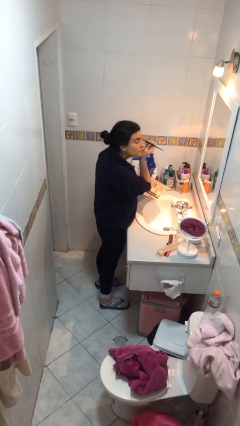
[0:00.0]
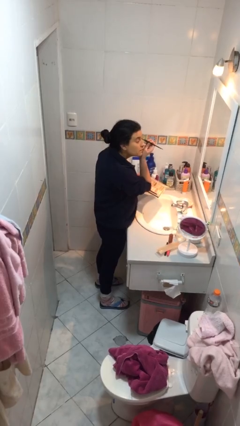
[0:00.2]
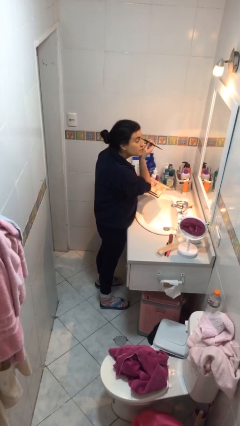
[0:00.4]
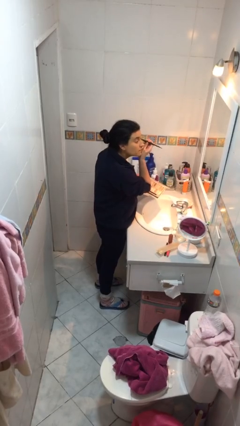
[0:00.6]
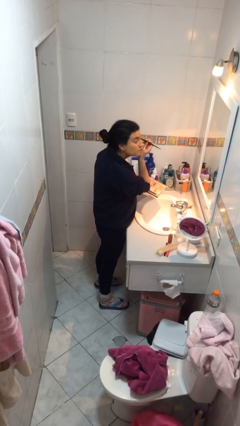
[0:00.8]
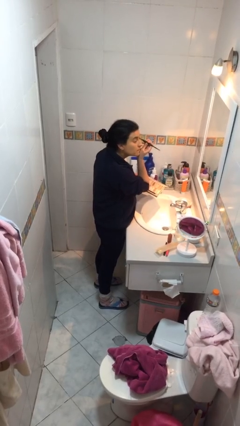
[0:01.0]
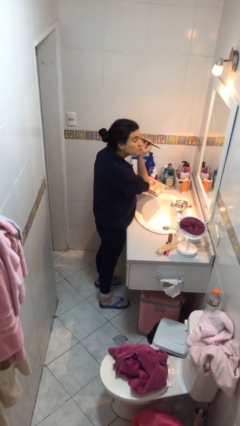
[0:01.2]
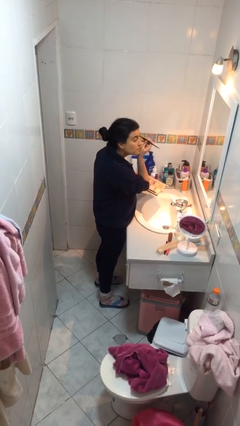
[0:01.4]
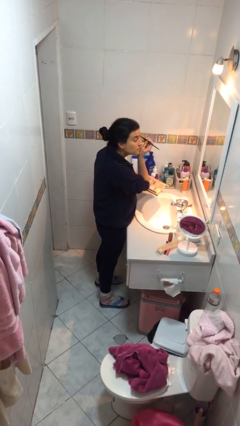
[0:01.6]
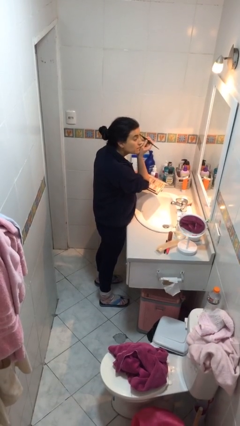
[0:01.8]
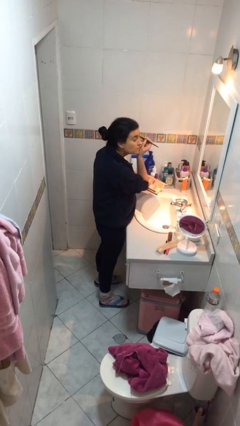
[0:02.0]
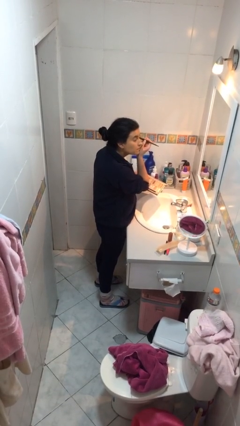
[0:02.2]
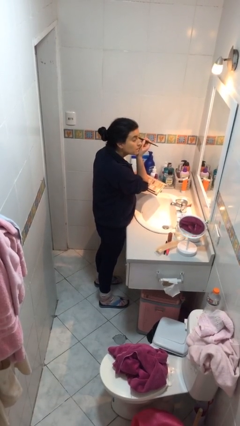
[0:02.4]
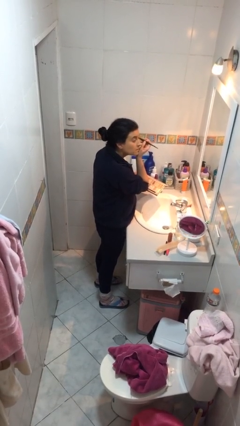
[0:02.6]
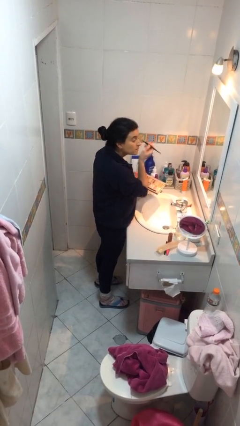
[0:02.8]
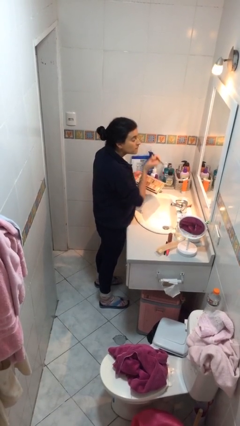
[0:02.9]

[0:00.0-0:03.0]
person applies eye makeup

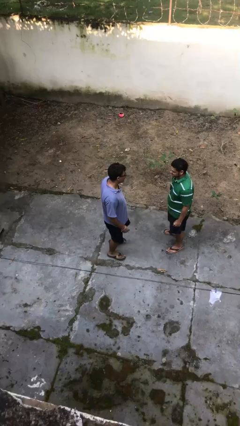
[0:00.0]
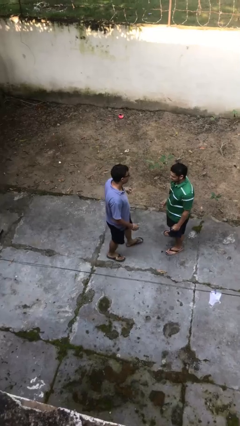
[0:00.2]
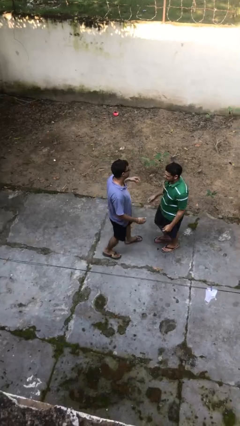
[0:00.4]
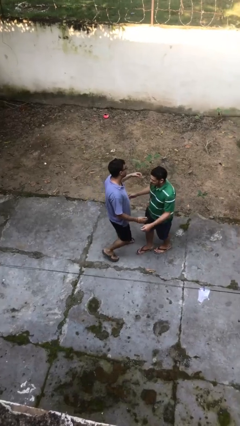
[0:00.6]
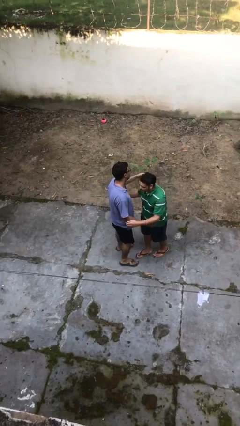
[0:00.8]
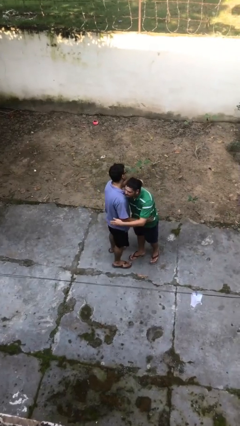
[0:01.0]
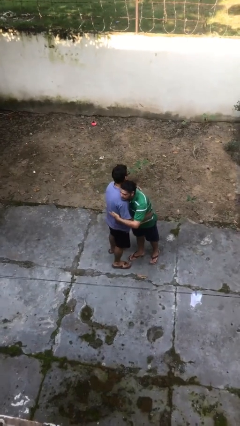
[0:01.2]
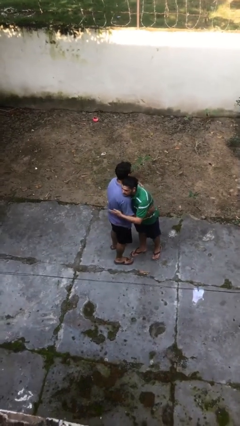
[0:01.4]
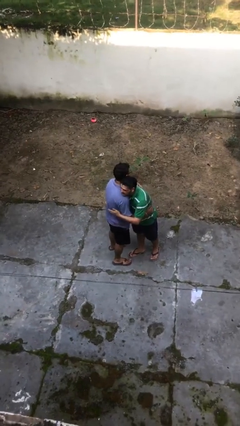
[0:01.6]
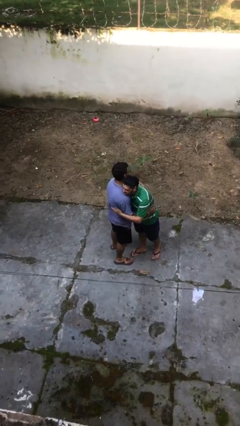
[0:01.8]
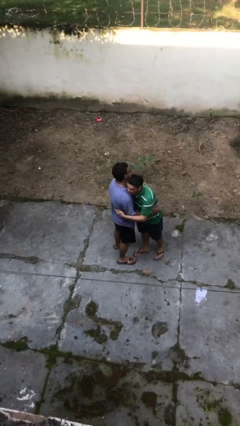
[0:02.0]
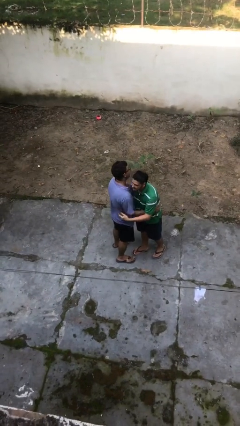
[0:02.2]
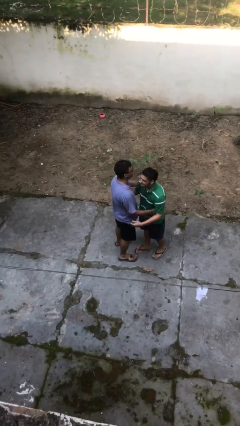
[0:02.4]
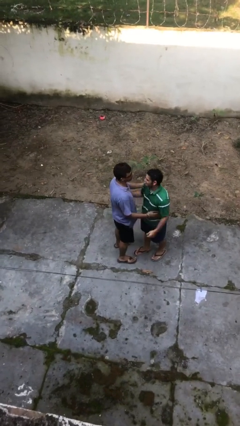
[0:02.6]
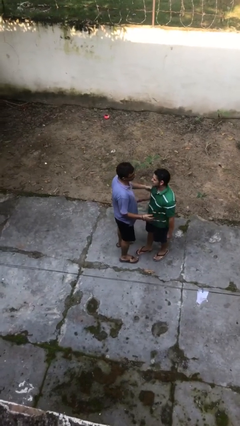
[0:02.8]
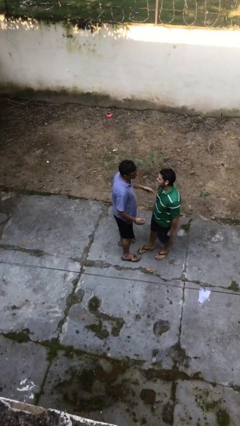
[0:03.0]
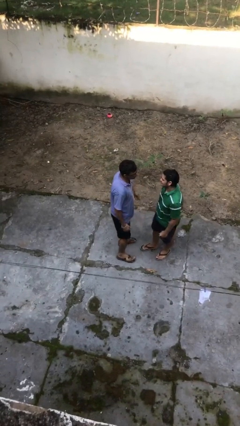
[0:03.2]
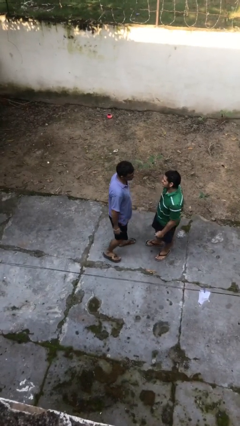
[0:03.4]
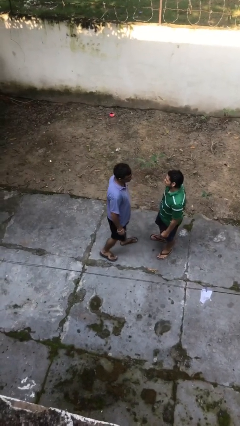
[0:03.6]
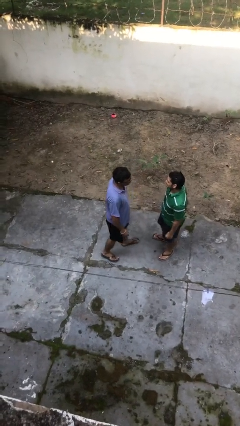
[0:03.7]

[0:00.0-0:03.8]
person embraces person

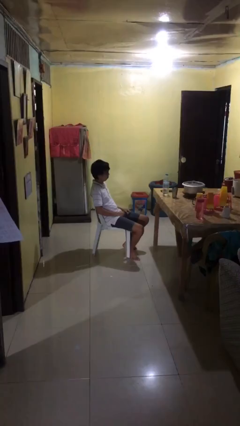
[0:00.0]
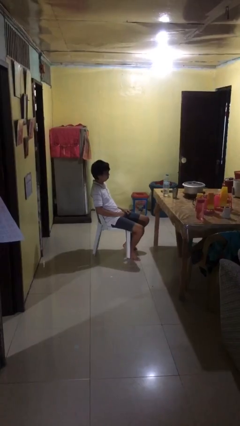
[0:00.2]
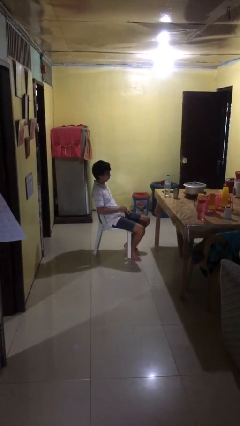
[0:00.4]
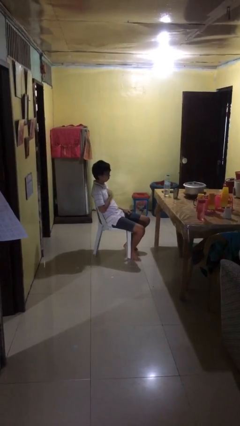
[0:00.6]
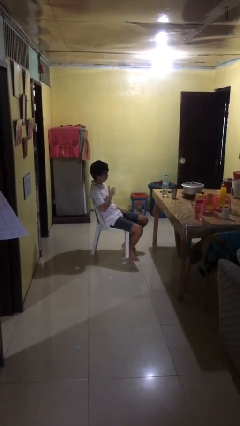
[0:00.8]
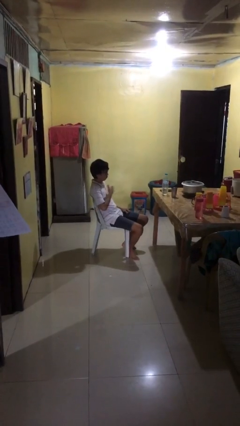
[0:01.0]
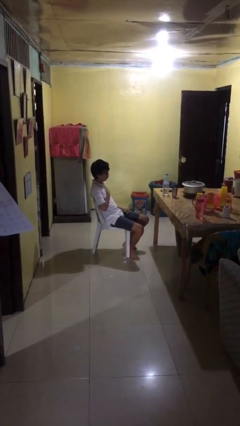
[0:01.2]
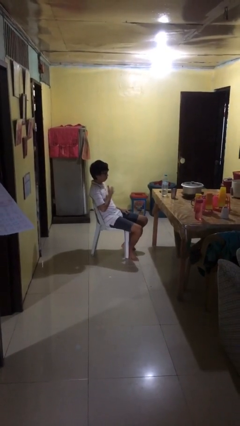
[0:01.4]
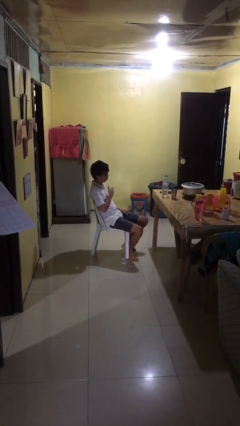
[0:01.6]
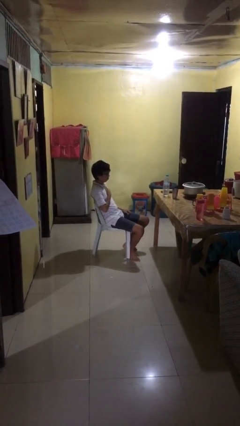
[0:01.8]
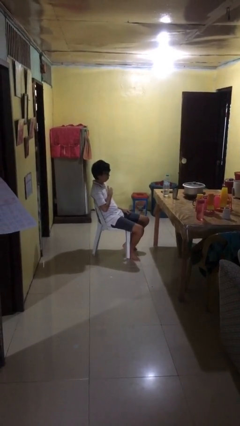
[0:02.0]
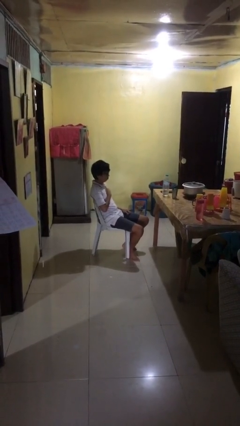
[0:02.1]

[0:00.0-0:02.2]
person drums on chest

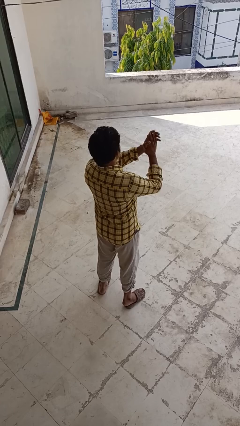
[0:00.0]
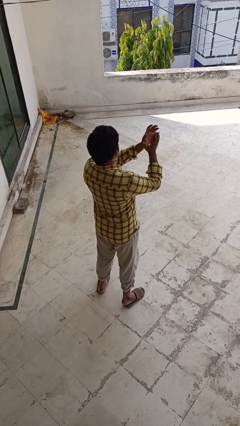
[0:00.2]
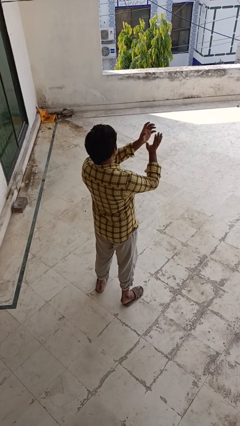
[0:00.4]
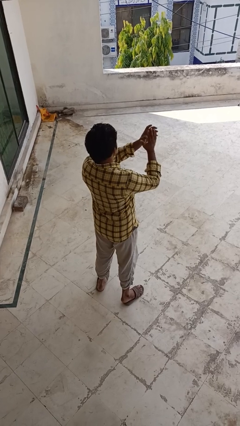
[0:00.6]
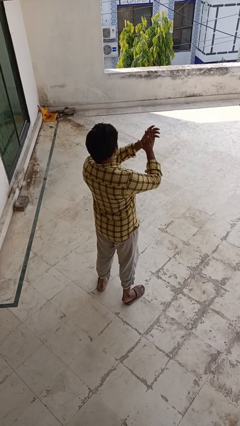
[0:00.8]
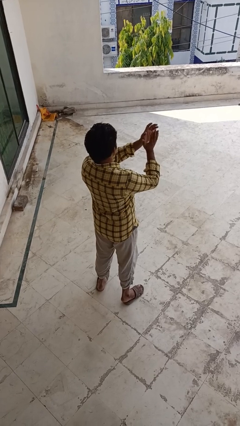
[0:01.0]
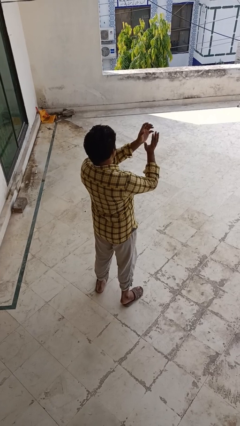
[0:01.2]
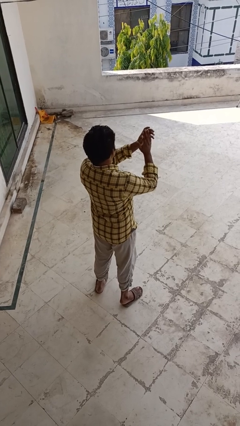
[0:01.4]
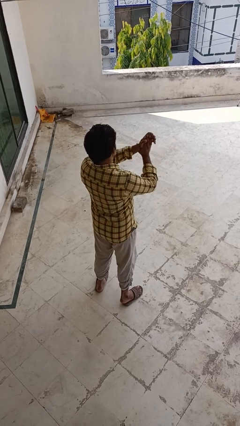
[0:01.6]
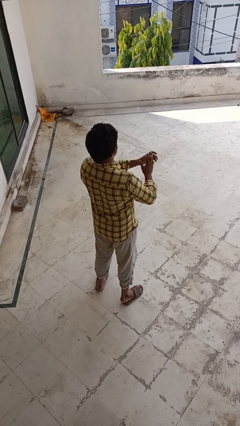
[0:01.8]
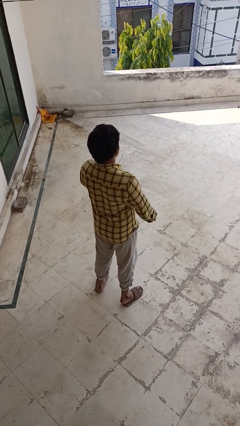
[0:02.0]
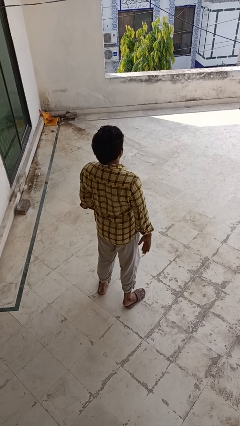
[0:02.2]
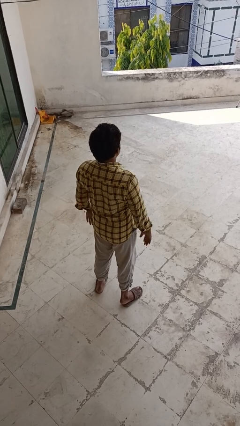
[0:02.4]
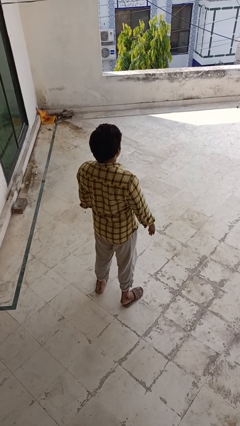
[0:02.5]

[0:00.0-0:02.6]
person claps hands

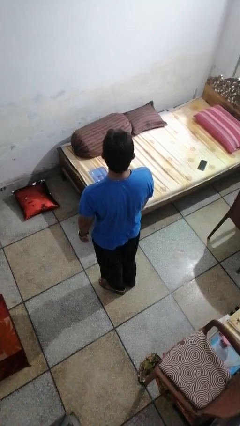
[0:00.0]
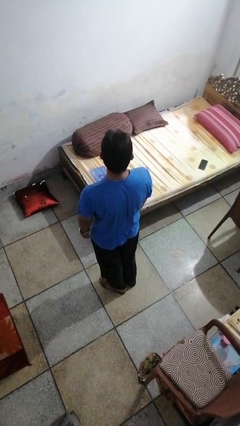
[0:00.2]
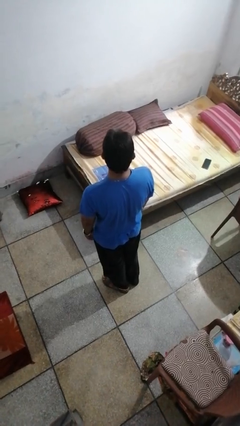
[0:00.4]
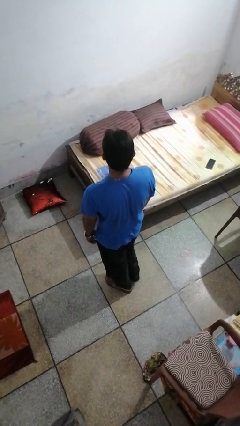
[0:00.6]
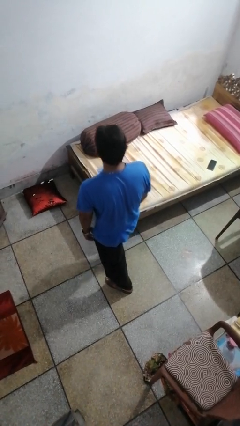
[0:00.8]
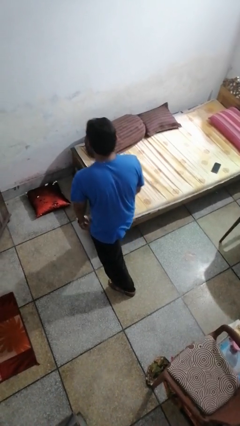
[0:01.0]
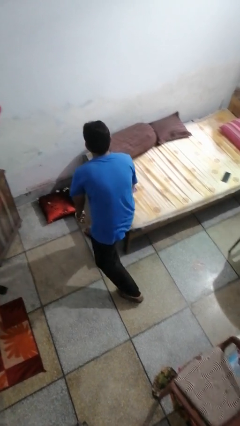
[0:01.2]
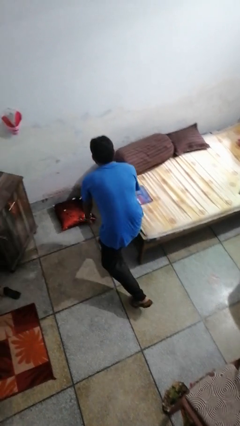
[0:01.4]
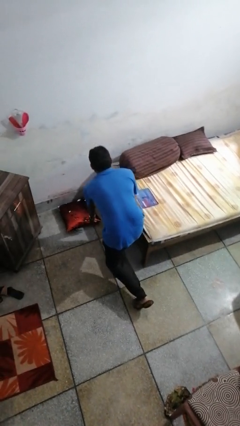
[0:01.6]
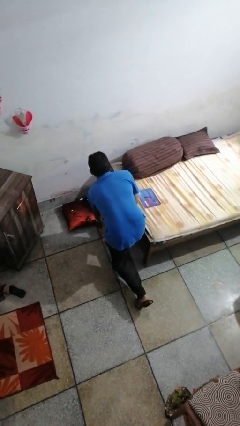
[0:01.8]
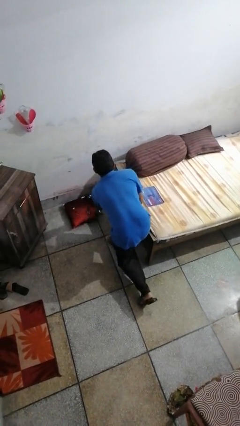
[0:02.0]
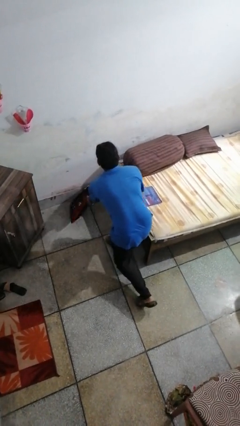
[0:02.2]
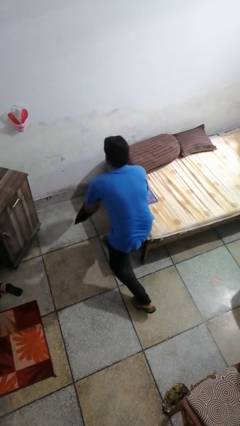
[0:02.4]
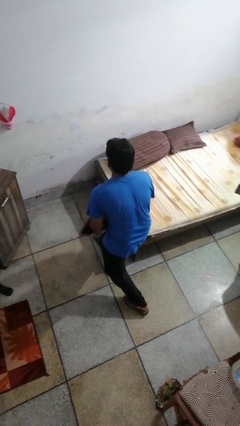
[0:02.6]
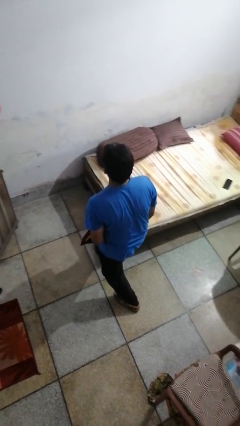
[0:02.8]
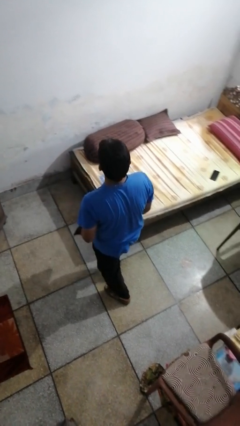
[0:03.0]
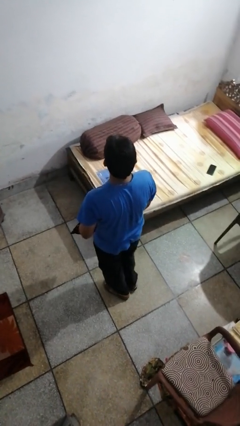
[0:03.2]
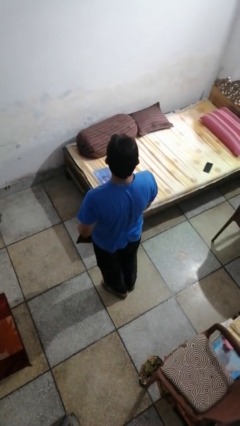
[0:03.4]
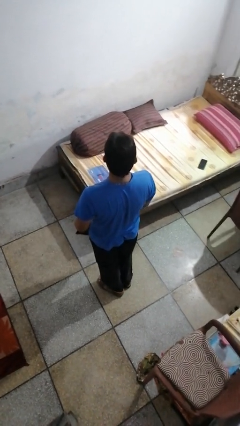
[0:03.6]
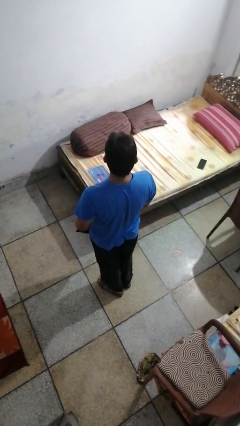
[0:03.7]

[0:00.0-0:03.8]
person picks up object from floor

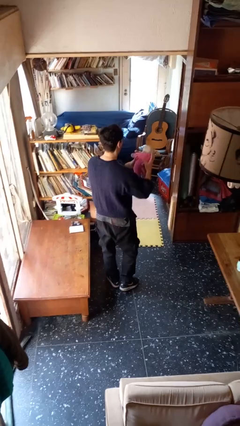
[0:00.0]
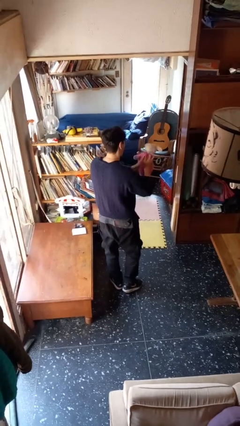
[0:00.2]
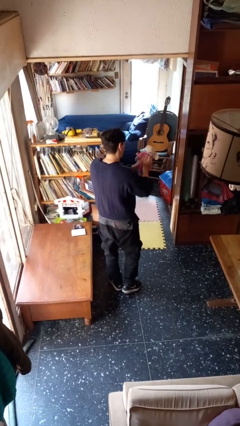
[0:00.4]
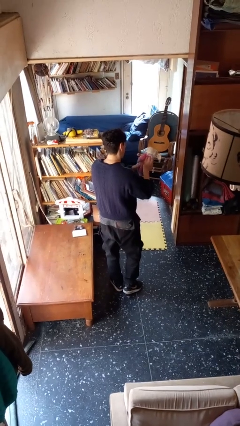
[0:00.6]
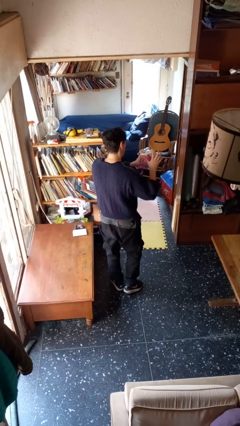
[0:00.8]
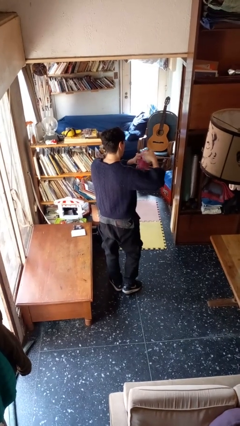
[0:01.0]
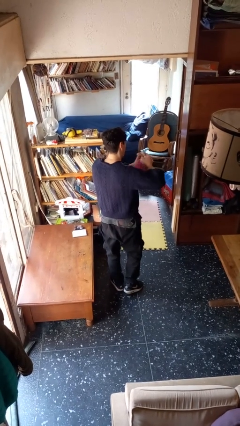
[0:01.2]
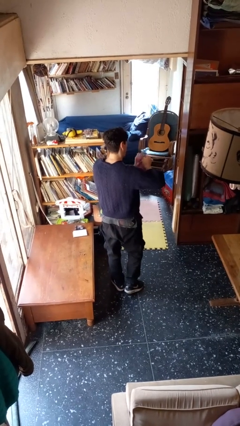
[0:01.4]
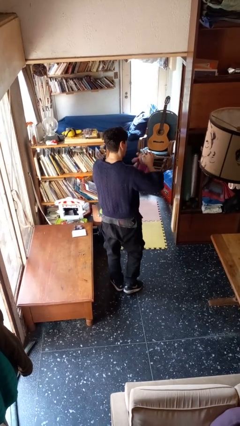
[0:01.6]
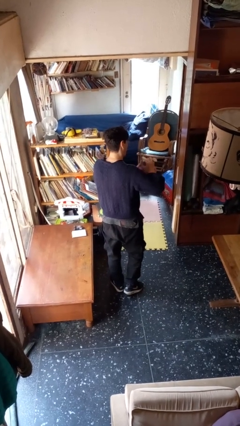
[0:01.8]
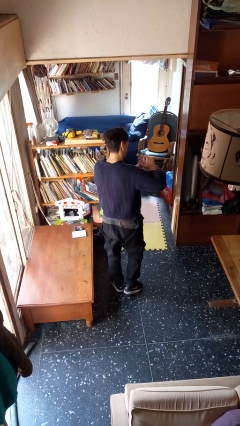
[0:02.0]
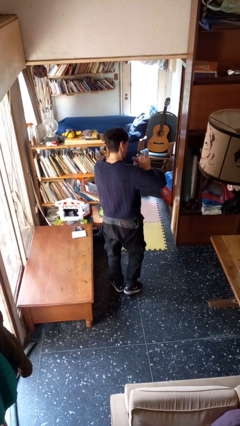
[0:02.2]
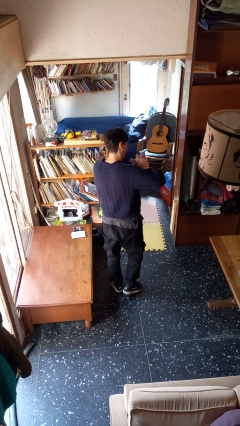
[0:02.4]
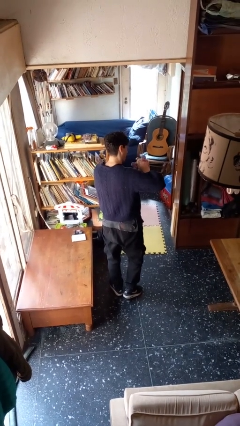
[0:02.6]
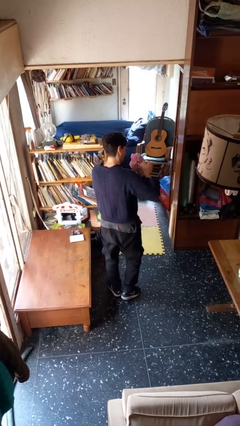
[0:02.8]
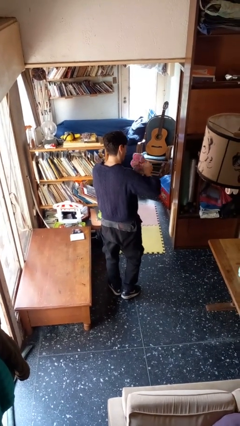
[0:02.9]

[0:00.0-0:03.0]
person squeezes object
